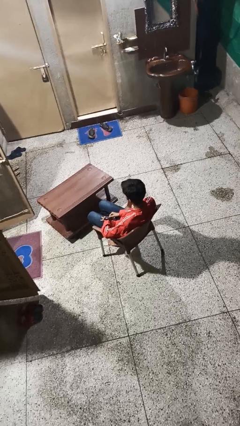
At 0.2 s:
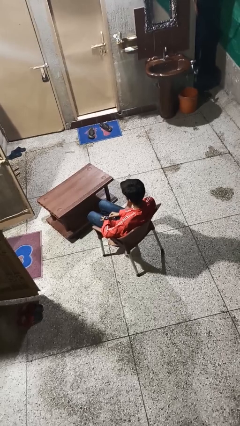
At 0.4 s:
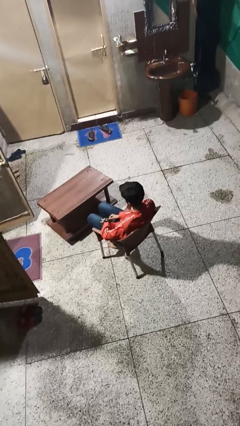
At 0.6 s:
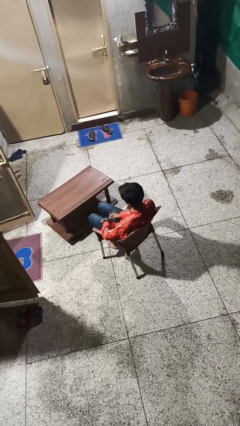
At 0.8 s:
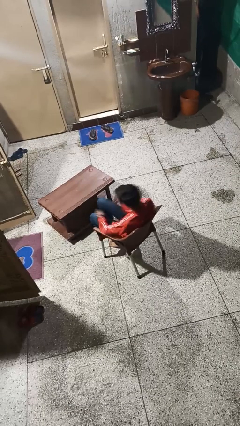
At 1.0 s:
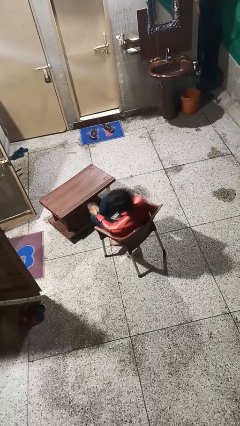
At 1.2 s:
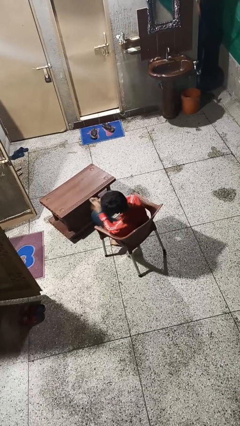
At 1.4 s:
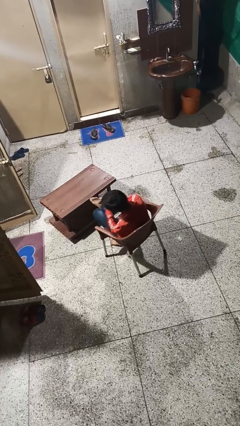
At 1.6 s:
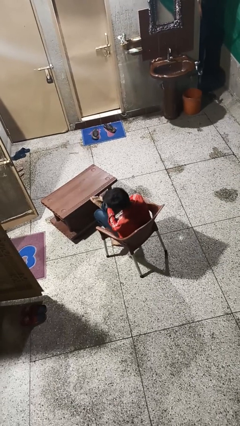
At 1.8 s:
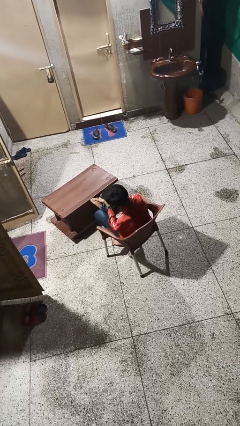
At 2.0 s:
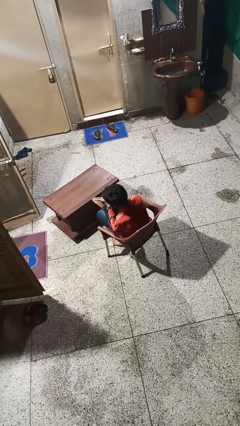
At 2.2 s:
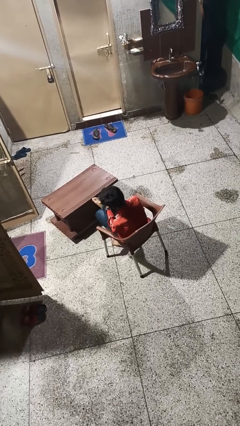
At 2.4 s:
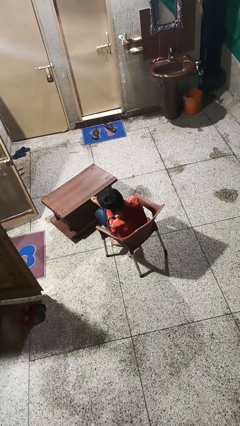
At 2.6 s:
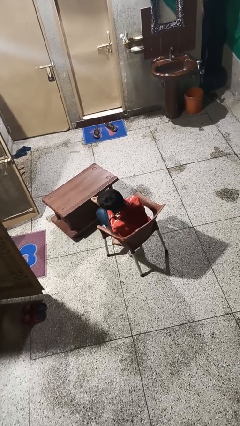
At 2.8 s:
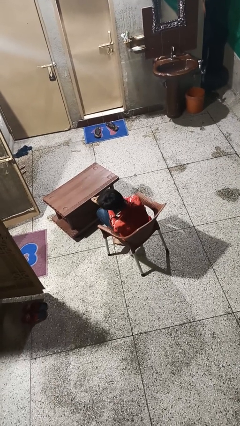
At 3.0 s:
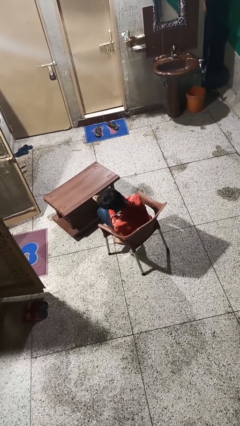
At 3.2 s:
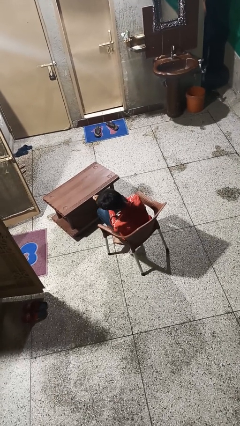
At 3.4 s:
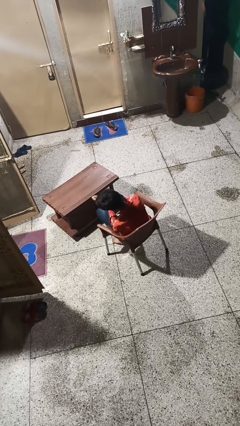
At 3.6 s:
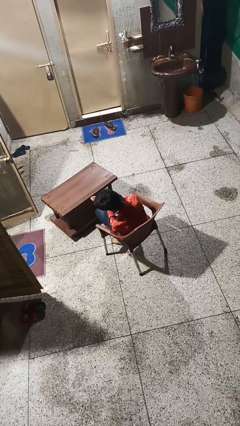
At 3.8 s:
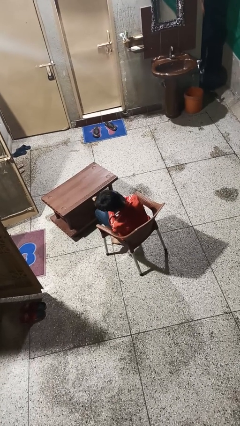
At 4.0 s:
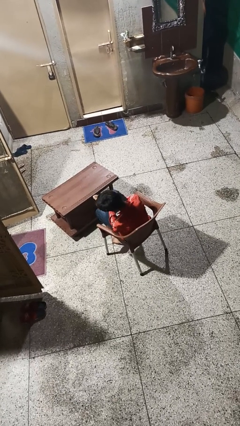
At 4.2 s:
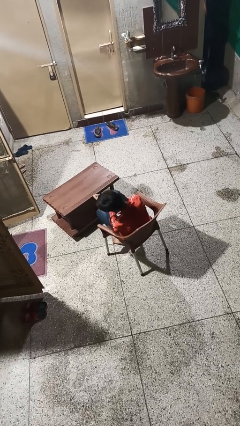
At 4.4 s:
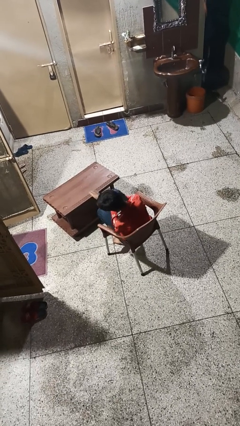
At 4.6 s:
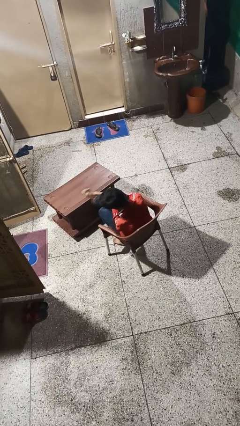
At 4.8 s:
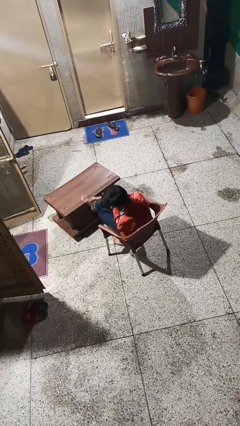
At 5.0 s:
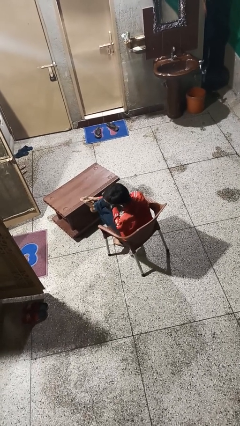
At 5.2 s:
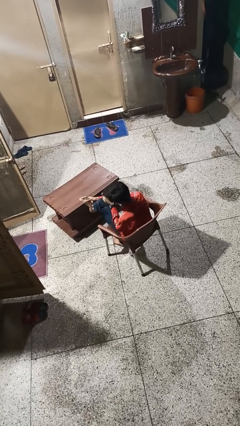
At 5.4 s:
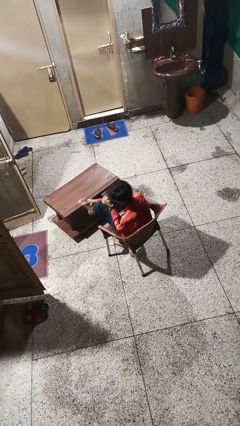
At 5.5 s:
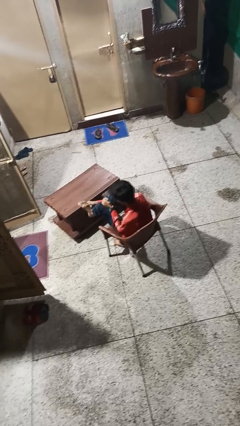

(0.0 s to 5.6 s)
person rubs foot

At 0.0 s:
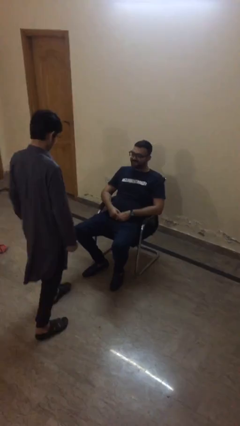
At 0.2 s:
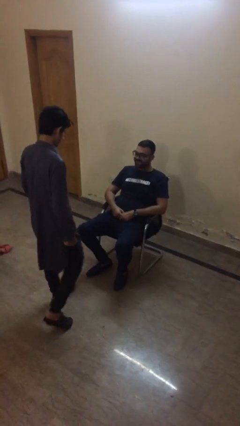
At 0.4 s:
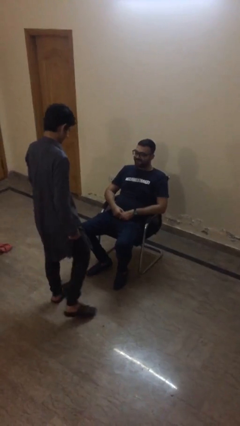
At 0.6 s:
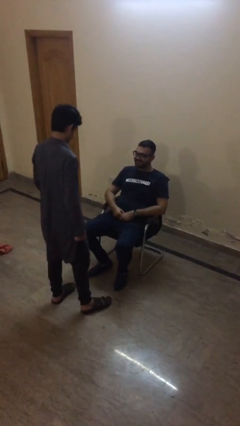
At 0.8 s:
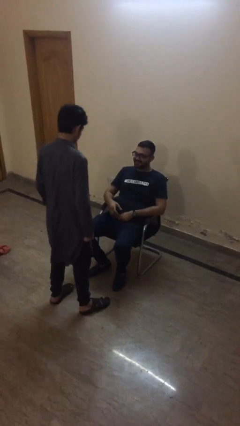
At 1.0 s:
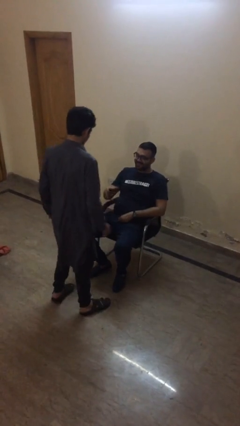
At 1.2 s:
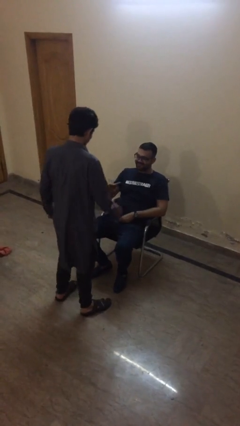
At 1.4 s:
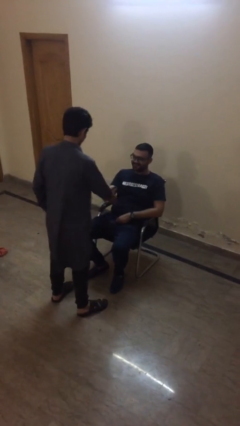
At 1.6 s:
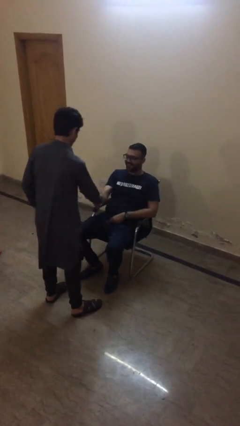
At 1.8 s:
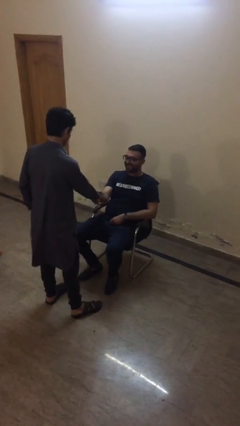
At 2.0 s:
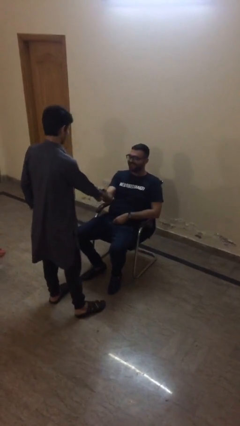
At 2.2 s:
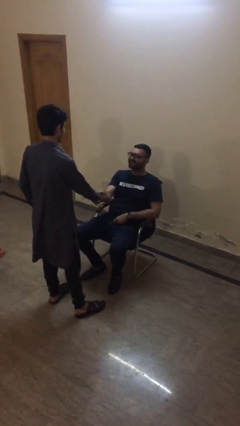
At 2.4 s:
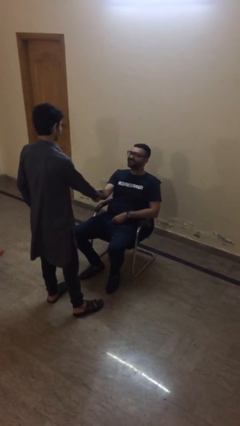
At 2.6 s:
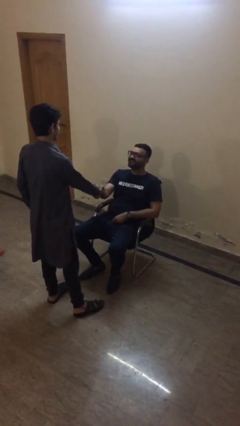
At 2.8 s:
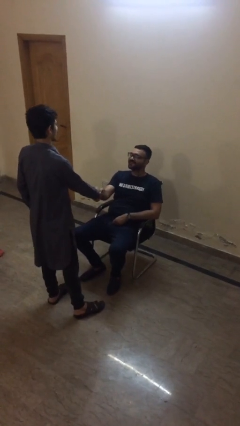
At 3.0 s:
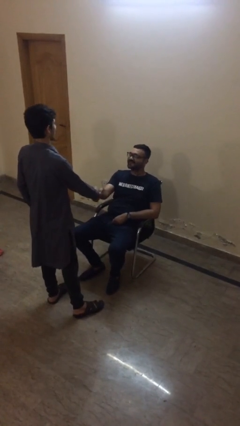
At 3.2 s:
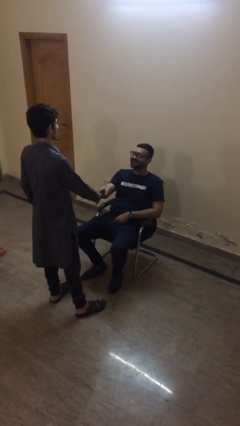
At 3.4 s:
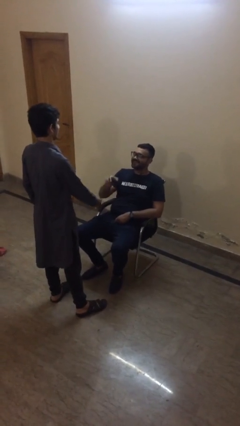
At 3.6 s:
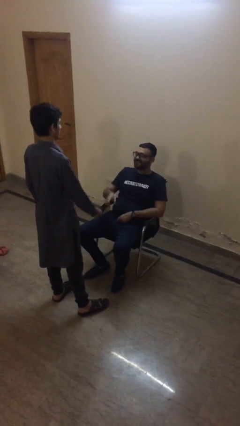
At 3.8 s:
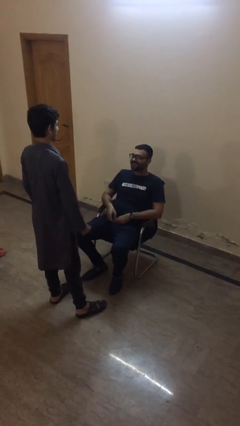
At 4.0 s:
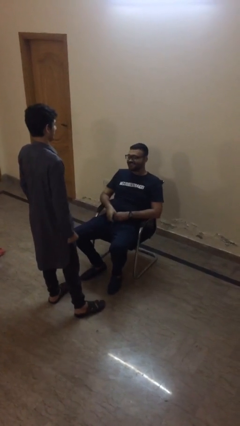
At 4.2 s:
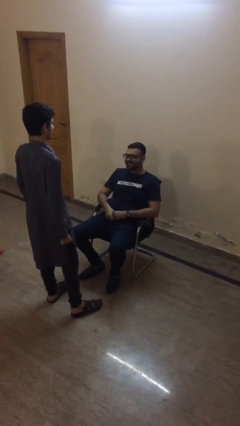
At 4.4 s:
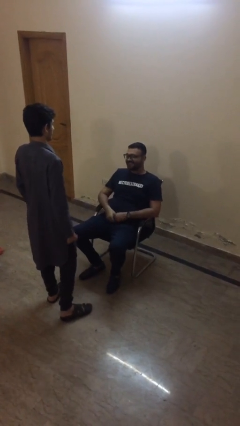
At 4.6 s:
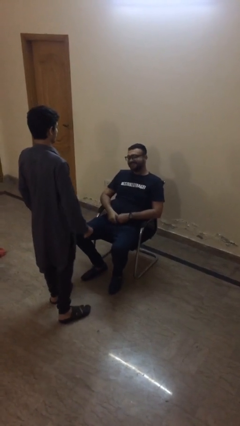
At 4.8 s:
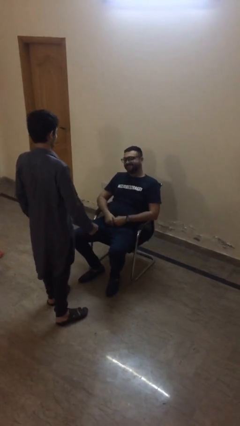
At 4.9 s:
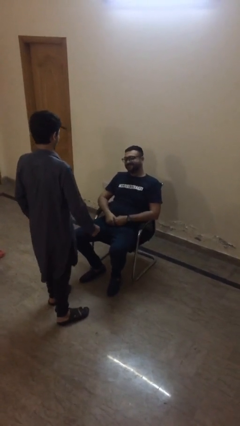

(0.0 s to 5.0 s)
person shakes hand

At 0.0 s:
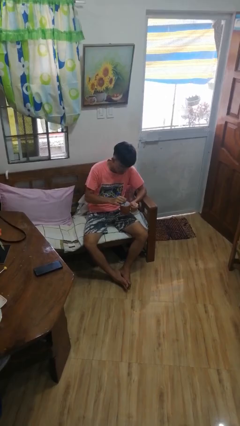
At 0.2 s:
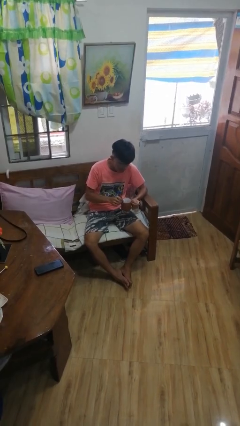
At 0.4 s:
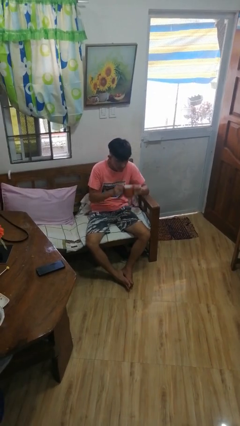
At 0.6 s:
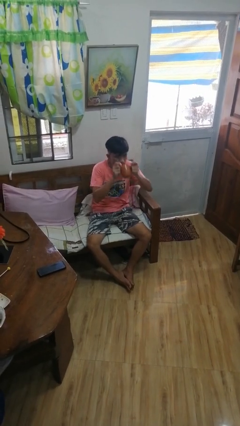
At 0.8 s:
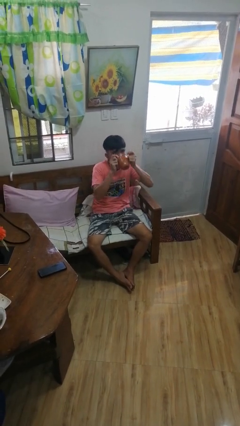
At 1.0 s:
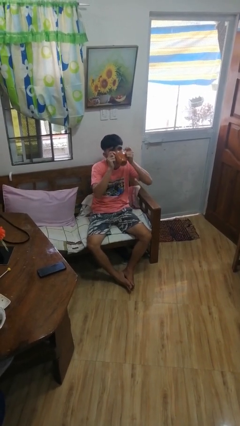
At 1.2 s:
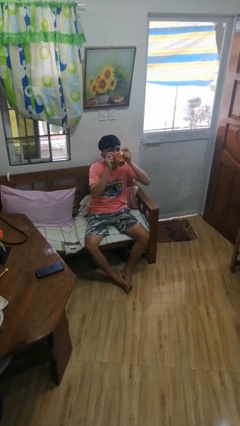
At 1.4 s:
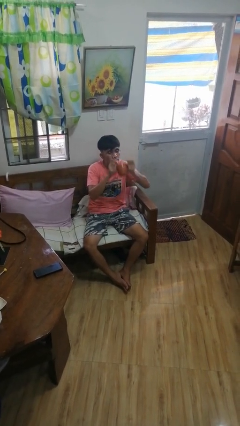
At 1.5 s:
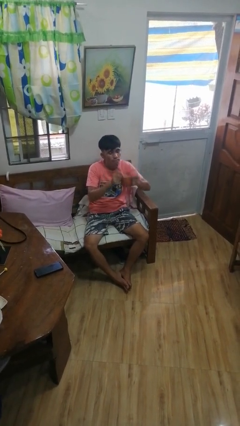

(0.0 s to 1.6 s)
person drinks from mug

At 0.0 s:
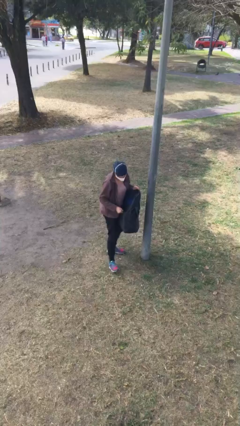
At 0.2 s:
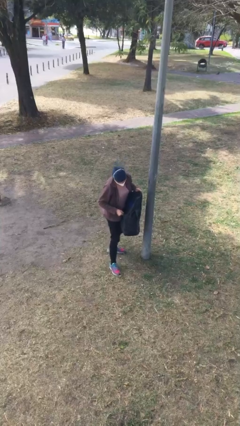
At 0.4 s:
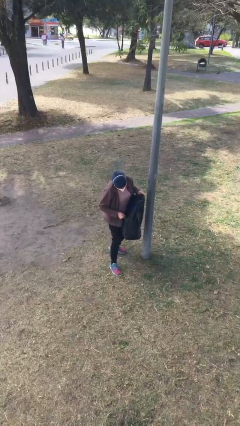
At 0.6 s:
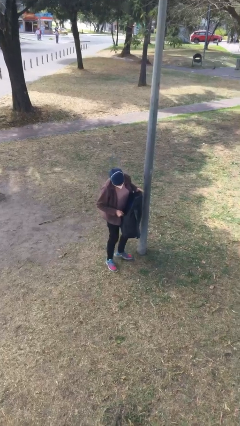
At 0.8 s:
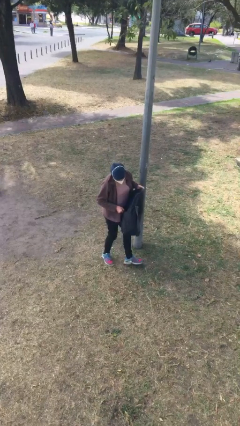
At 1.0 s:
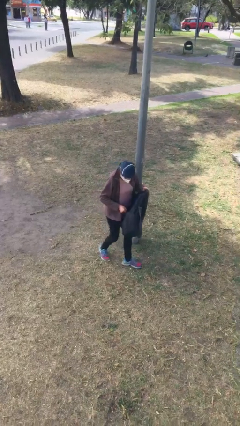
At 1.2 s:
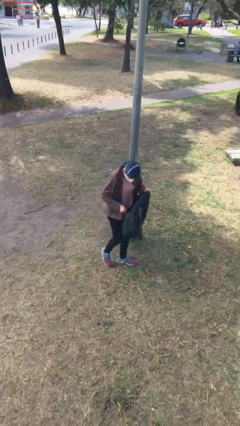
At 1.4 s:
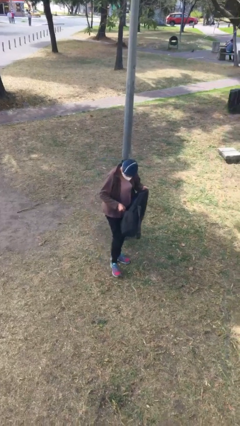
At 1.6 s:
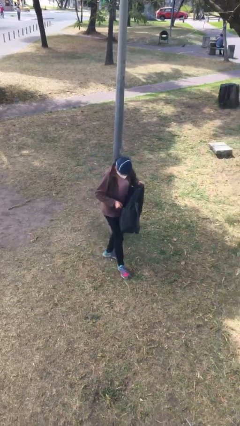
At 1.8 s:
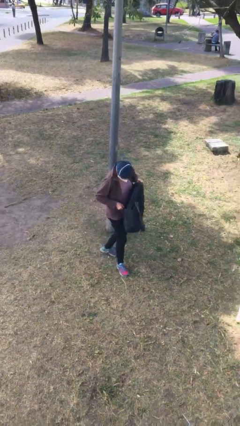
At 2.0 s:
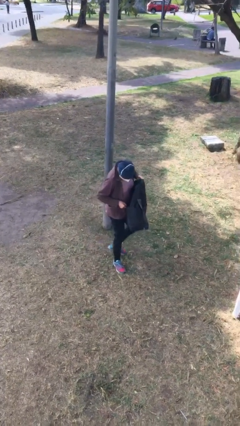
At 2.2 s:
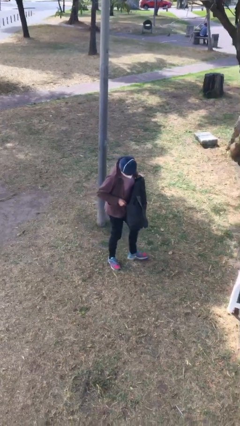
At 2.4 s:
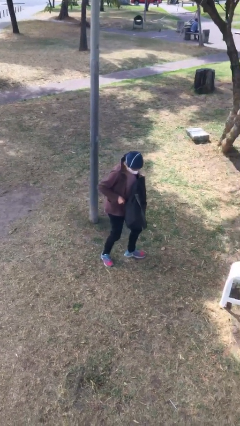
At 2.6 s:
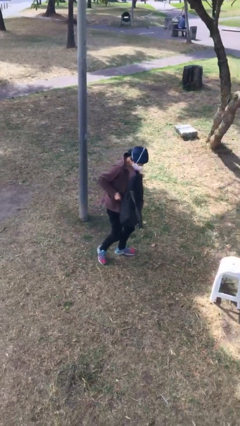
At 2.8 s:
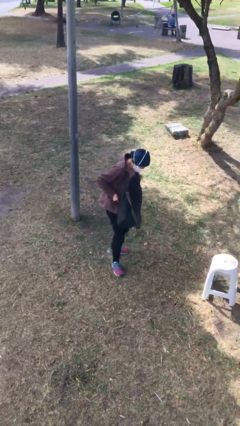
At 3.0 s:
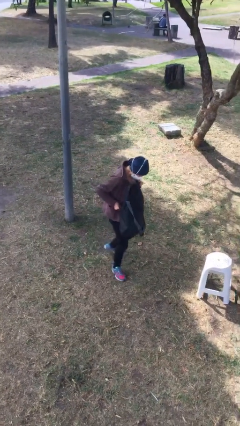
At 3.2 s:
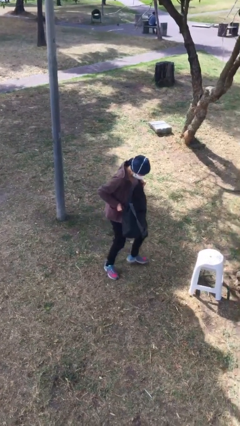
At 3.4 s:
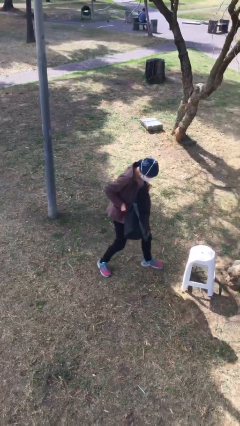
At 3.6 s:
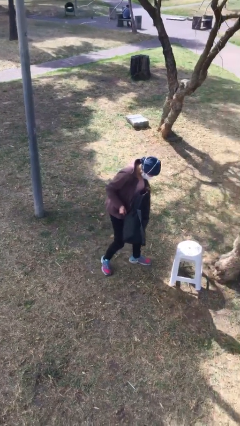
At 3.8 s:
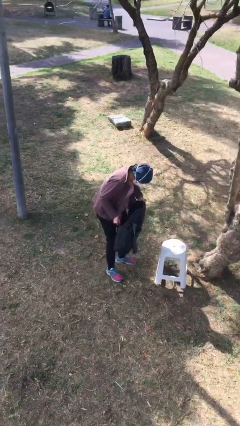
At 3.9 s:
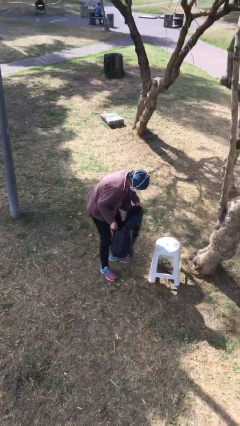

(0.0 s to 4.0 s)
person carries heavy object

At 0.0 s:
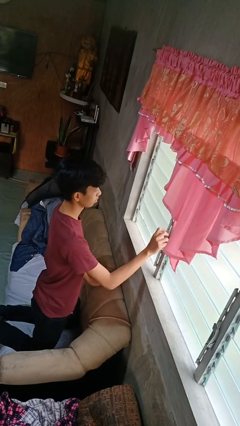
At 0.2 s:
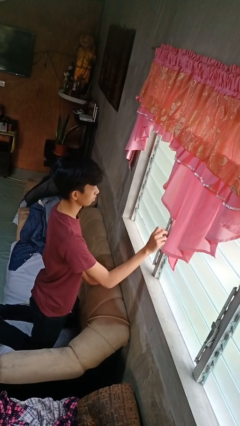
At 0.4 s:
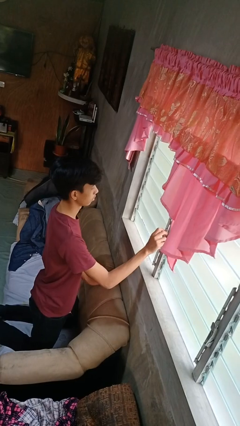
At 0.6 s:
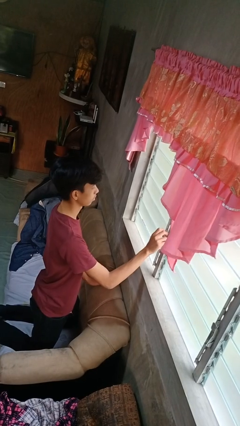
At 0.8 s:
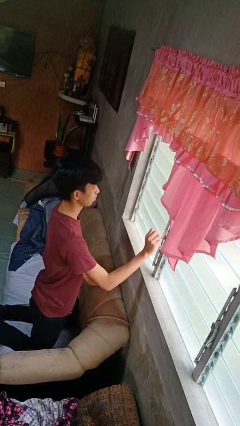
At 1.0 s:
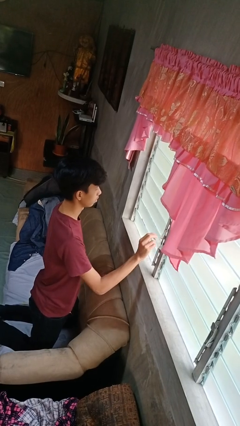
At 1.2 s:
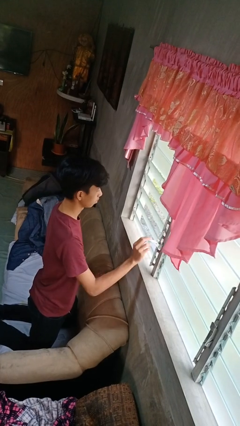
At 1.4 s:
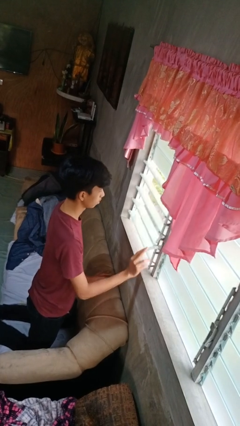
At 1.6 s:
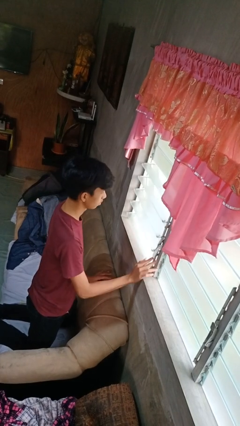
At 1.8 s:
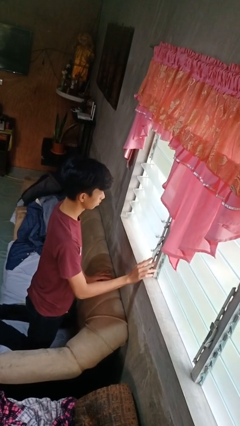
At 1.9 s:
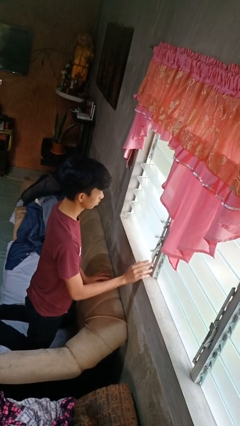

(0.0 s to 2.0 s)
person opens home window
